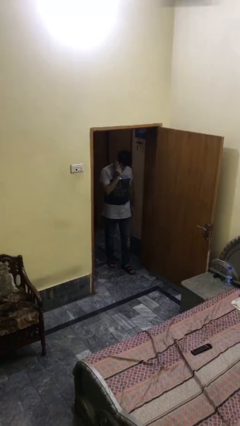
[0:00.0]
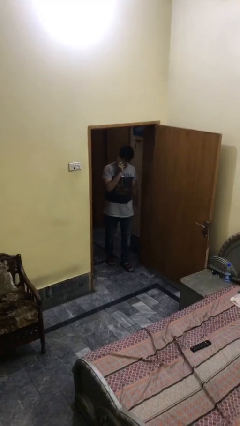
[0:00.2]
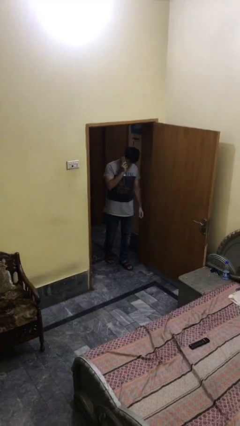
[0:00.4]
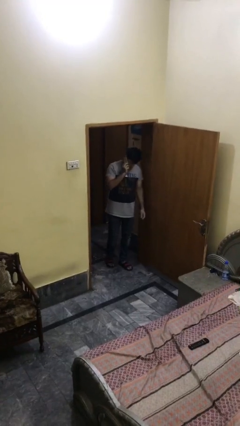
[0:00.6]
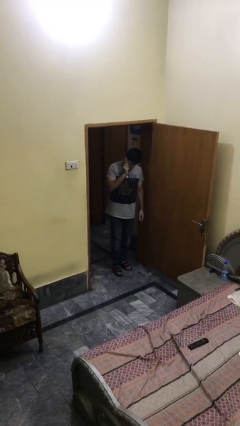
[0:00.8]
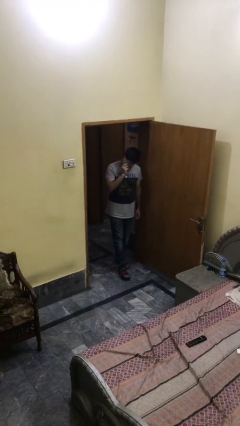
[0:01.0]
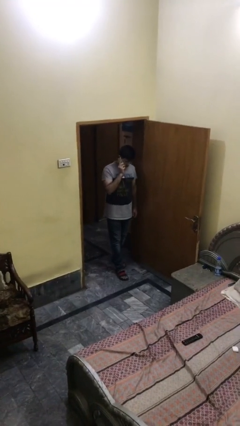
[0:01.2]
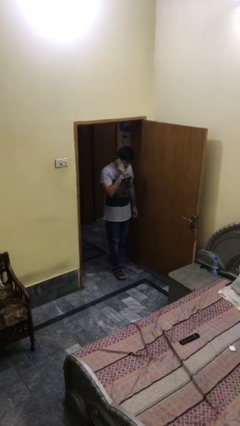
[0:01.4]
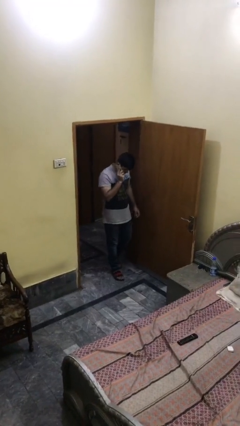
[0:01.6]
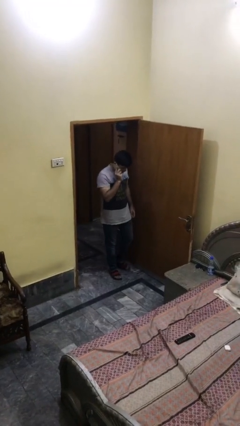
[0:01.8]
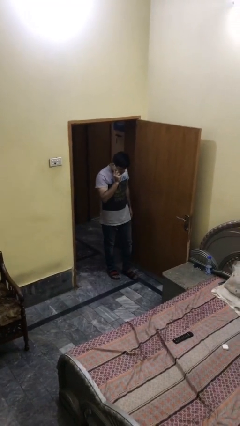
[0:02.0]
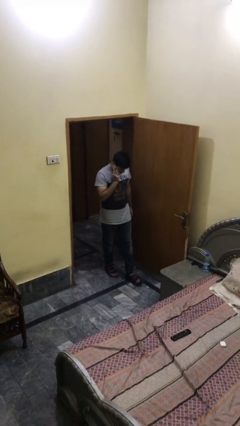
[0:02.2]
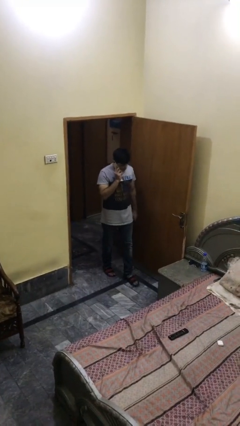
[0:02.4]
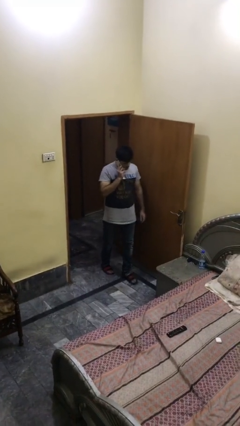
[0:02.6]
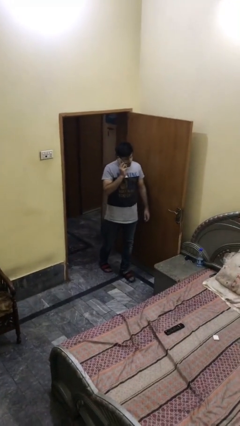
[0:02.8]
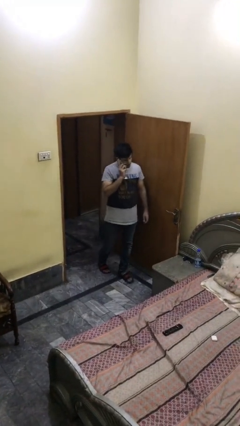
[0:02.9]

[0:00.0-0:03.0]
person enters scene through structure

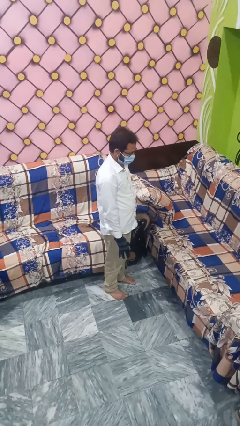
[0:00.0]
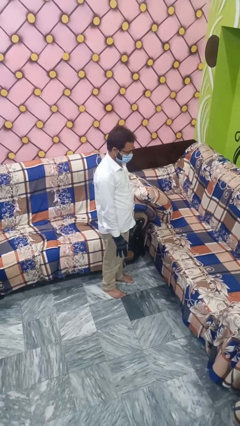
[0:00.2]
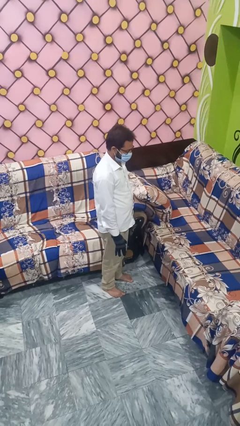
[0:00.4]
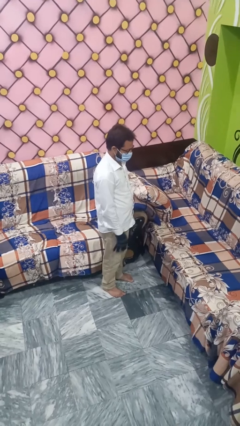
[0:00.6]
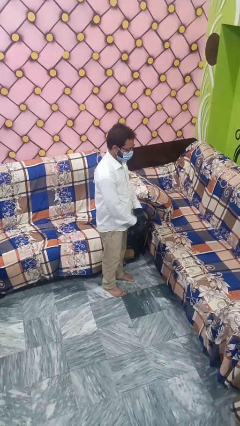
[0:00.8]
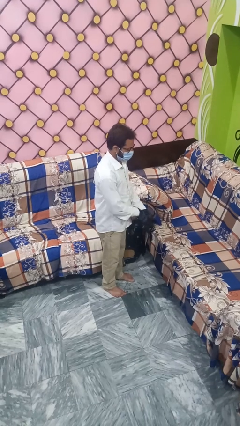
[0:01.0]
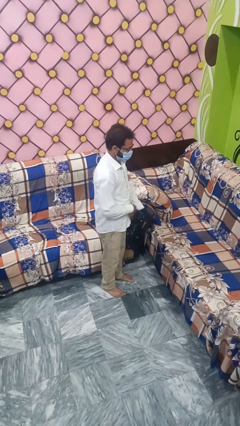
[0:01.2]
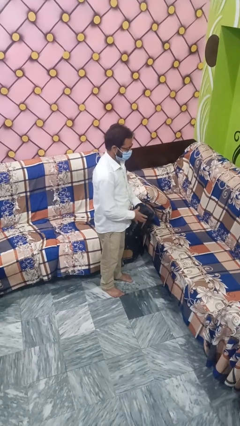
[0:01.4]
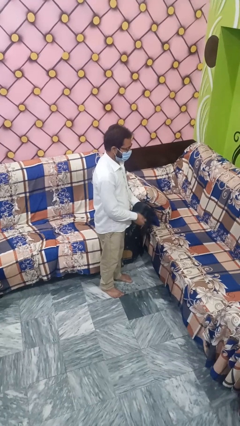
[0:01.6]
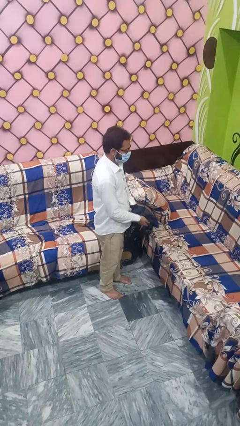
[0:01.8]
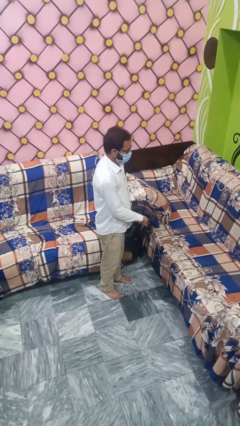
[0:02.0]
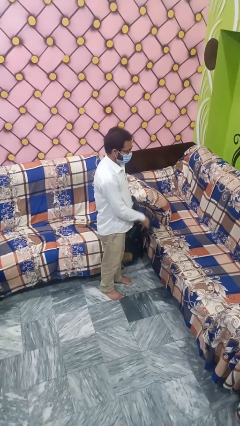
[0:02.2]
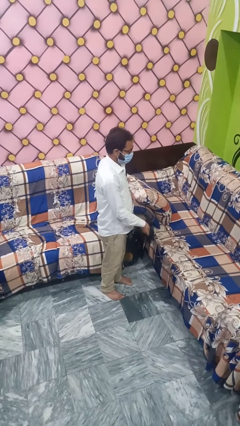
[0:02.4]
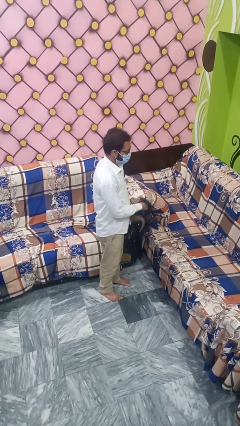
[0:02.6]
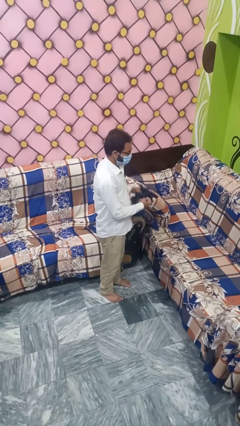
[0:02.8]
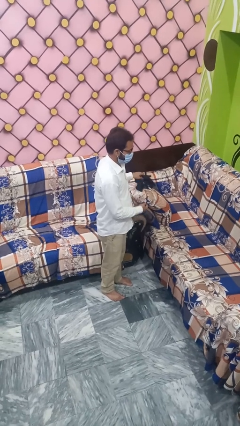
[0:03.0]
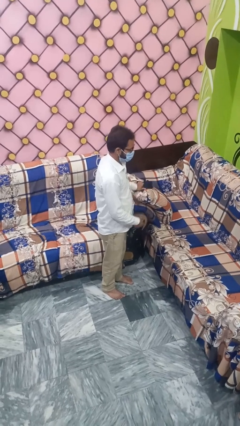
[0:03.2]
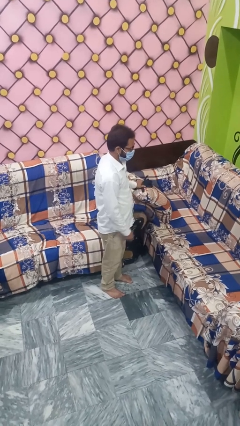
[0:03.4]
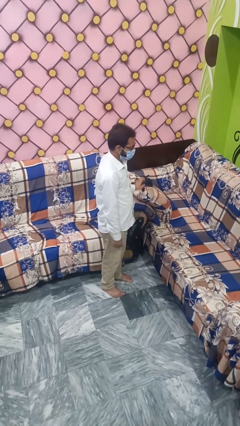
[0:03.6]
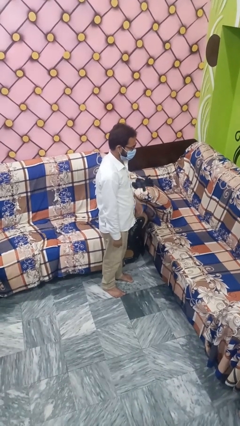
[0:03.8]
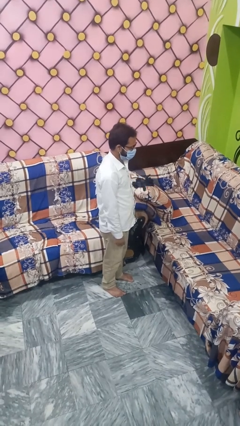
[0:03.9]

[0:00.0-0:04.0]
person takes off gloves

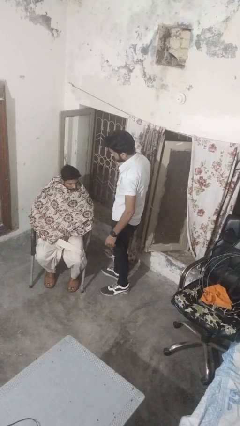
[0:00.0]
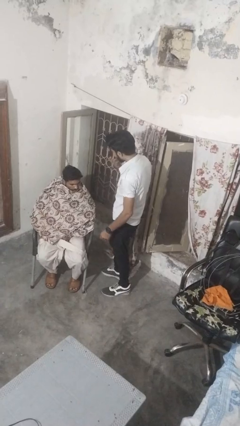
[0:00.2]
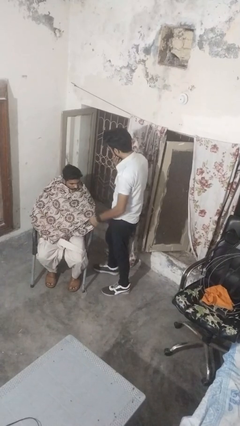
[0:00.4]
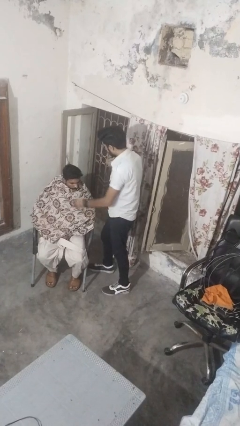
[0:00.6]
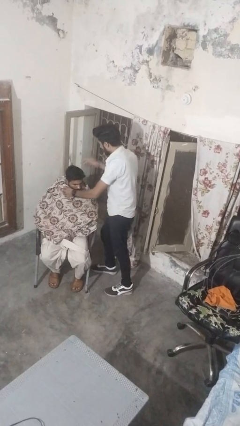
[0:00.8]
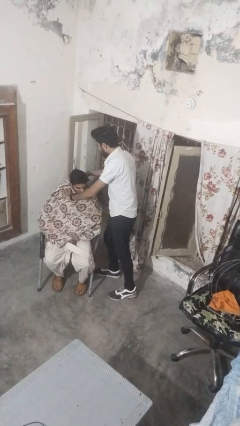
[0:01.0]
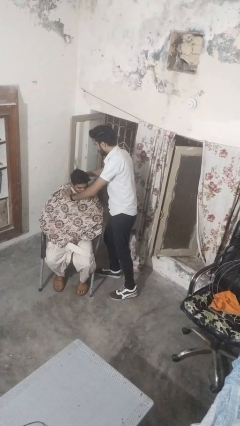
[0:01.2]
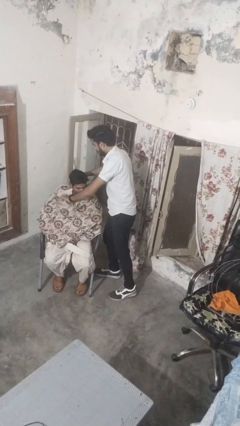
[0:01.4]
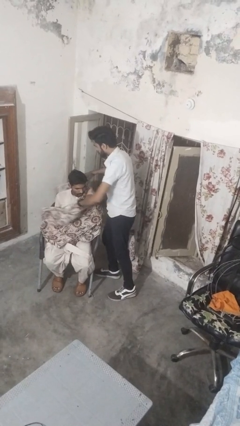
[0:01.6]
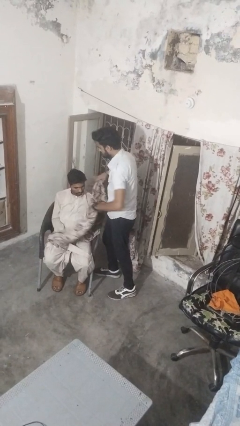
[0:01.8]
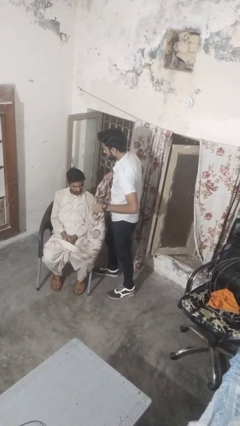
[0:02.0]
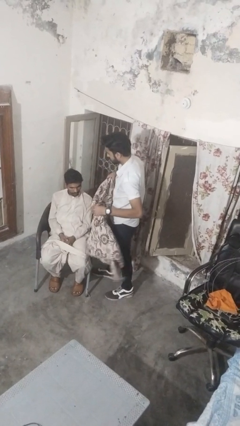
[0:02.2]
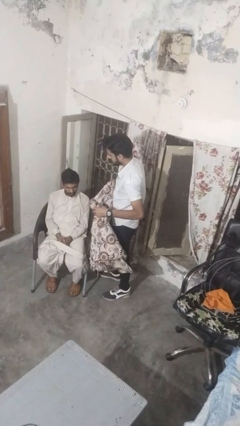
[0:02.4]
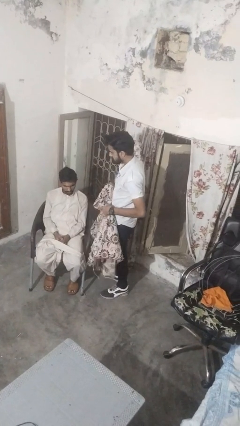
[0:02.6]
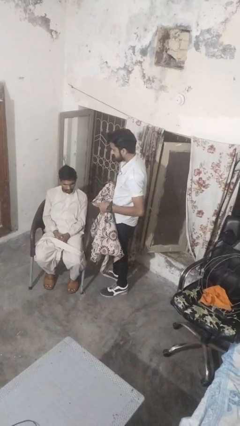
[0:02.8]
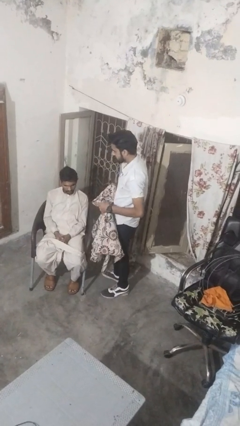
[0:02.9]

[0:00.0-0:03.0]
person uncovers friend with blanket

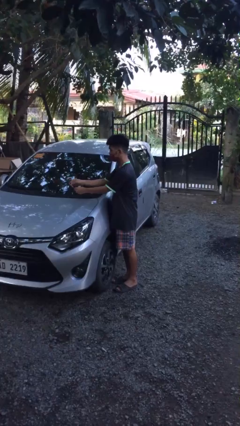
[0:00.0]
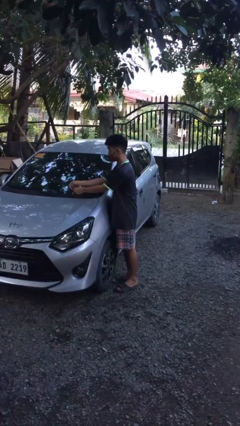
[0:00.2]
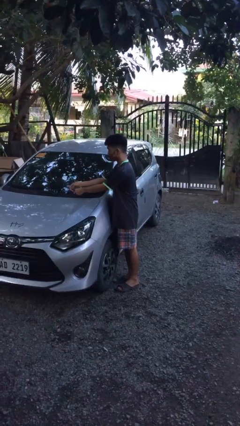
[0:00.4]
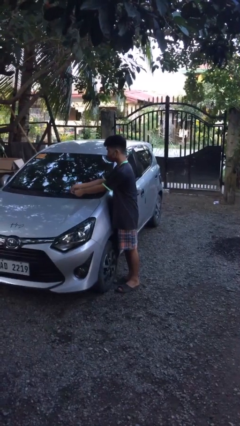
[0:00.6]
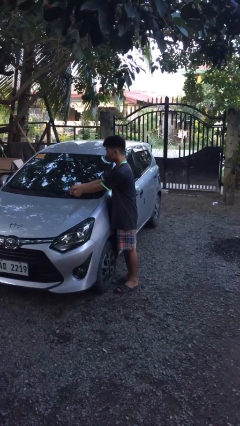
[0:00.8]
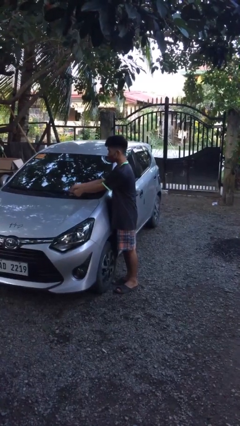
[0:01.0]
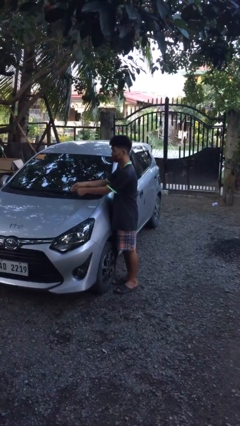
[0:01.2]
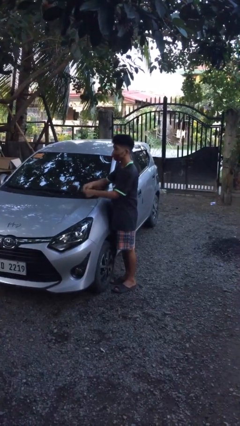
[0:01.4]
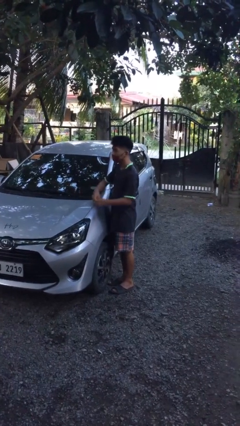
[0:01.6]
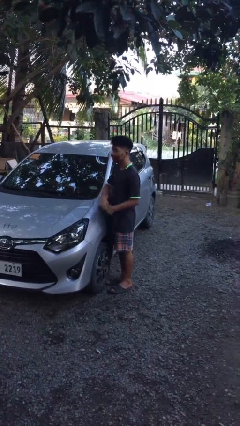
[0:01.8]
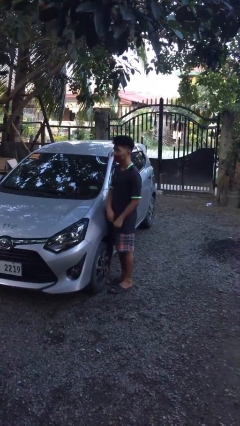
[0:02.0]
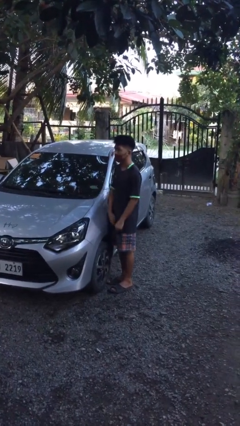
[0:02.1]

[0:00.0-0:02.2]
person flips down car wipers

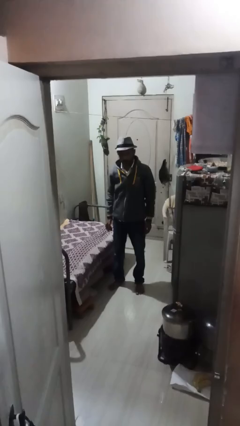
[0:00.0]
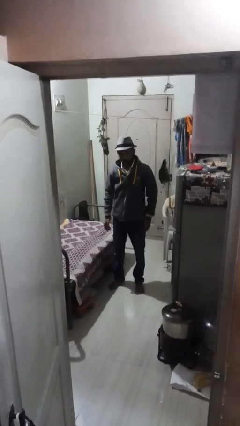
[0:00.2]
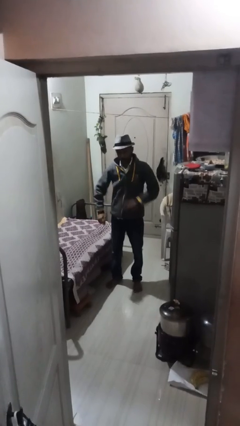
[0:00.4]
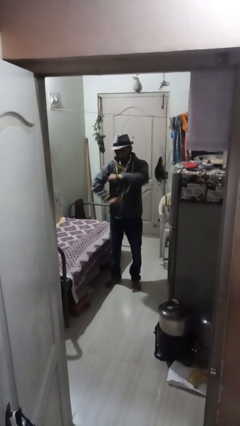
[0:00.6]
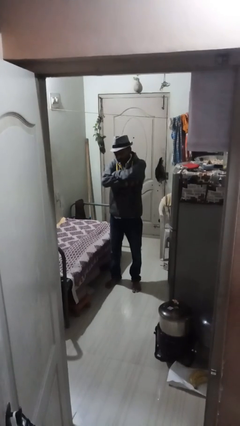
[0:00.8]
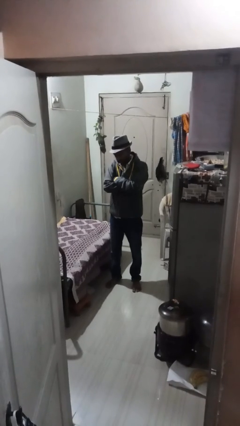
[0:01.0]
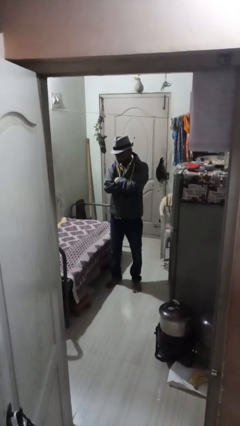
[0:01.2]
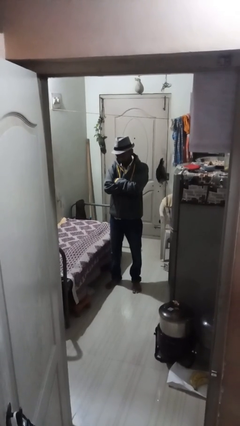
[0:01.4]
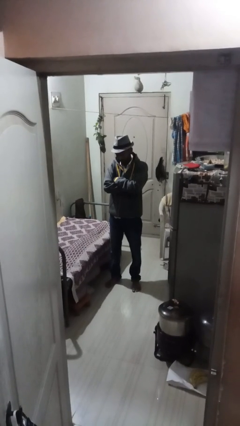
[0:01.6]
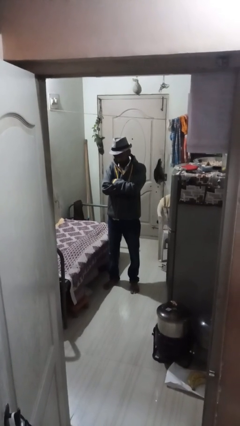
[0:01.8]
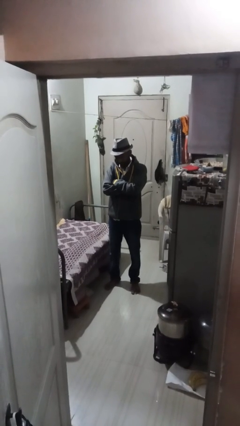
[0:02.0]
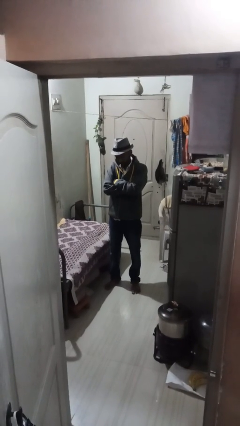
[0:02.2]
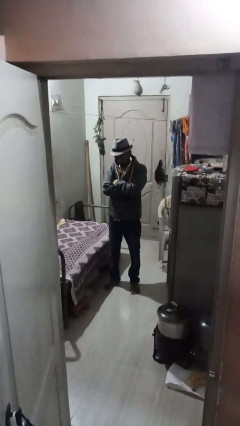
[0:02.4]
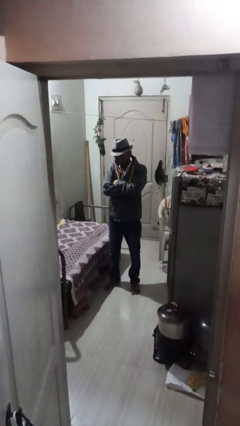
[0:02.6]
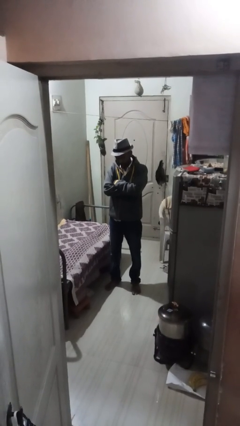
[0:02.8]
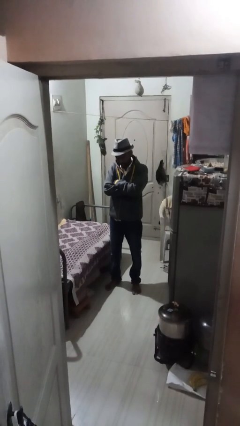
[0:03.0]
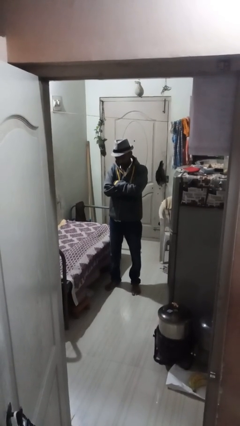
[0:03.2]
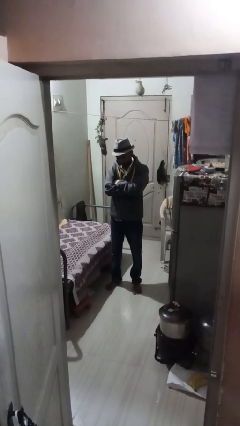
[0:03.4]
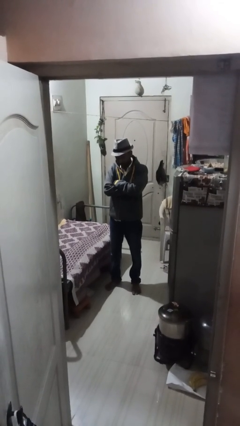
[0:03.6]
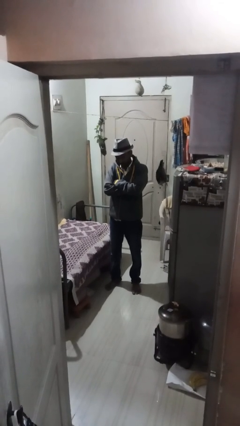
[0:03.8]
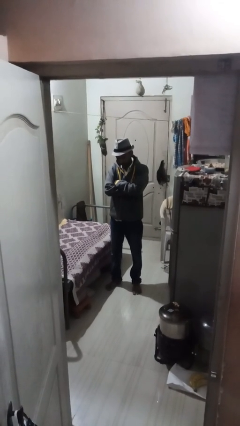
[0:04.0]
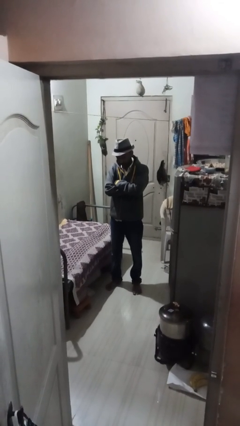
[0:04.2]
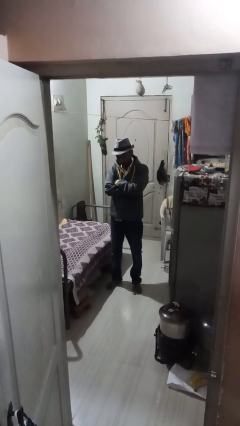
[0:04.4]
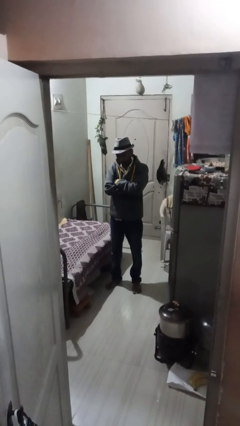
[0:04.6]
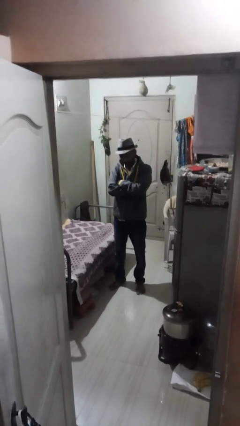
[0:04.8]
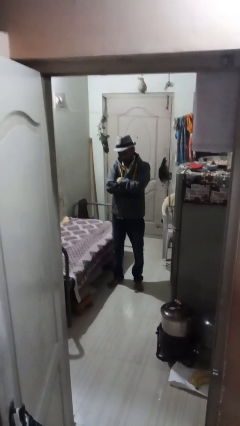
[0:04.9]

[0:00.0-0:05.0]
person crosses arms
